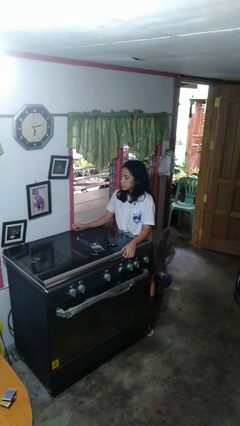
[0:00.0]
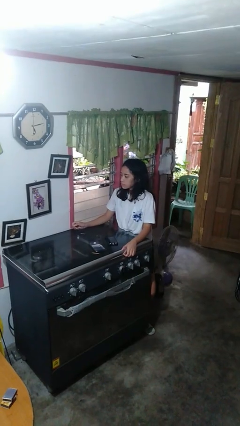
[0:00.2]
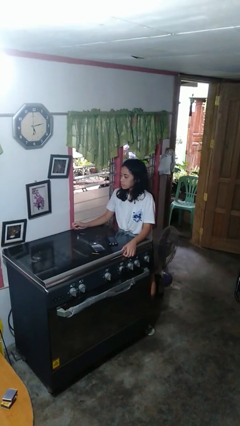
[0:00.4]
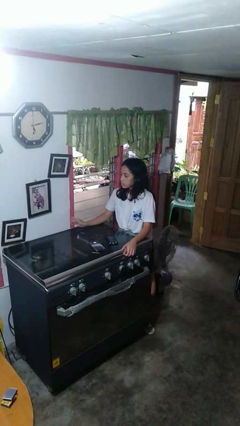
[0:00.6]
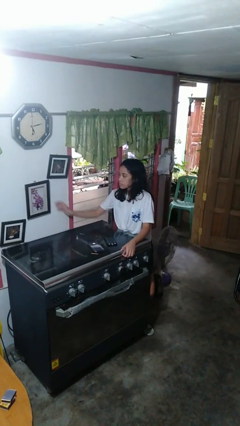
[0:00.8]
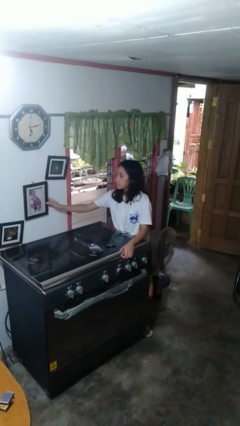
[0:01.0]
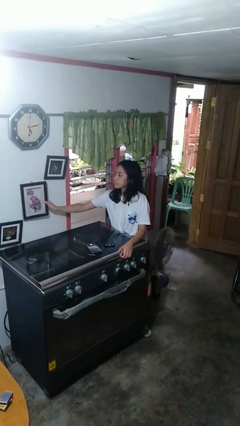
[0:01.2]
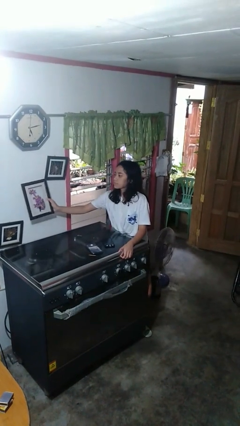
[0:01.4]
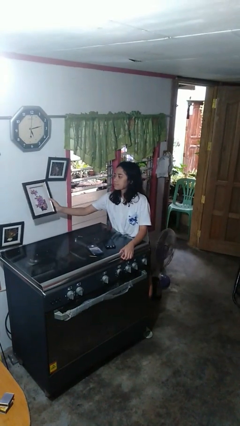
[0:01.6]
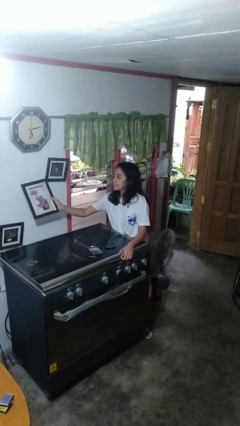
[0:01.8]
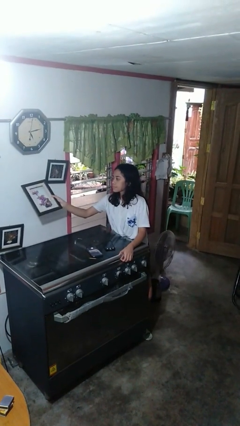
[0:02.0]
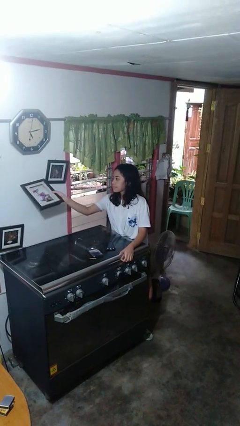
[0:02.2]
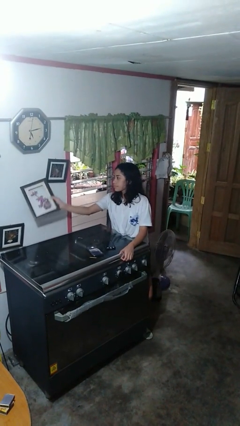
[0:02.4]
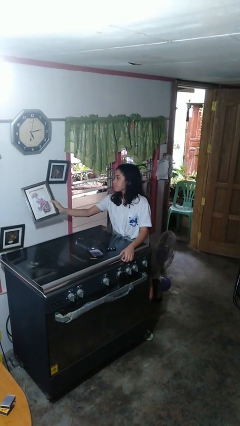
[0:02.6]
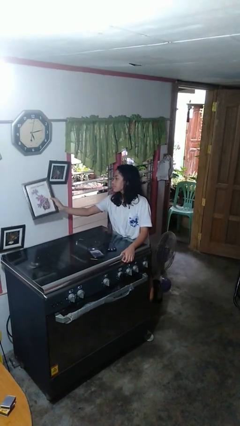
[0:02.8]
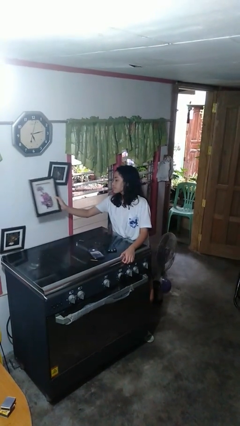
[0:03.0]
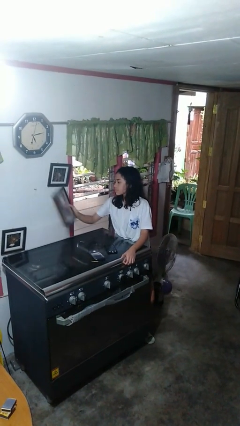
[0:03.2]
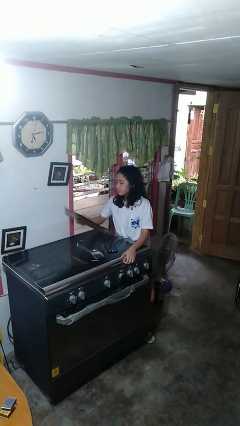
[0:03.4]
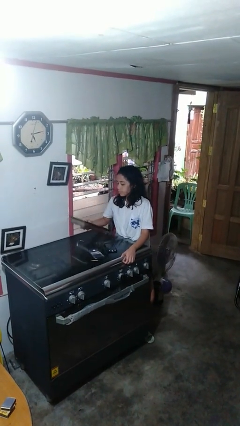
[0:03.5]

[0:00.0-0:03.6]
person takes down picture frame

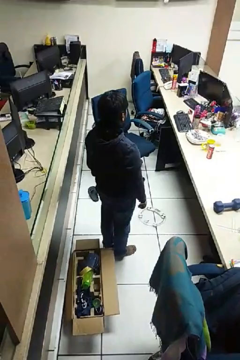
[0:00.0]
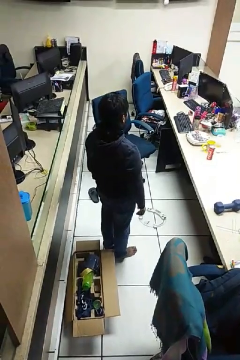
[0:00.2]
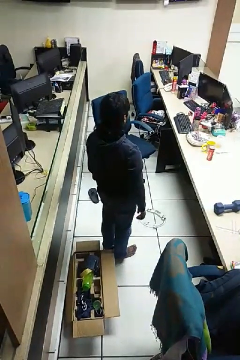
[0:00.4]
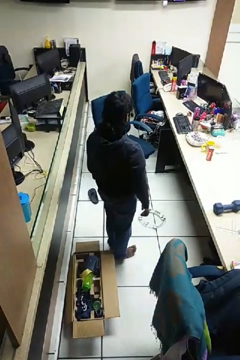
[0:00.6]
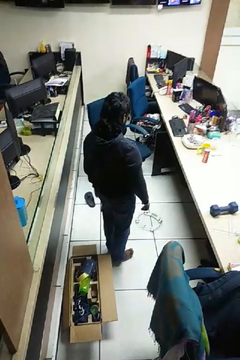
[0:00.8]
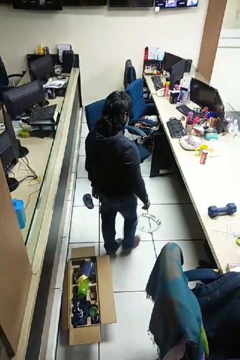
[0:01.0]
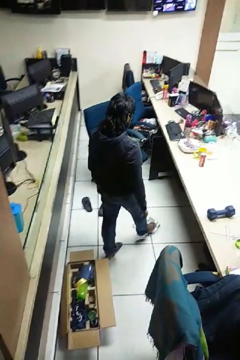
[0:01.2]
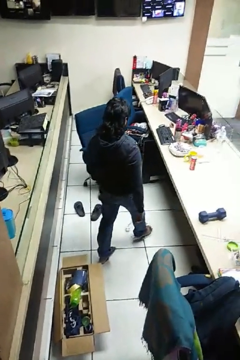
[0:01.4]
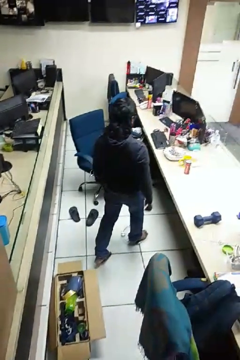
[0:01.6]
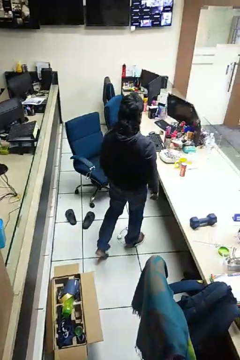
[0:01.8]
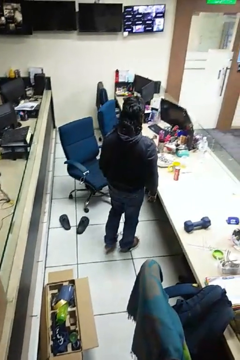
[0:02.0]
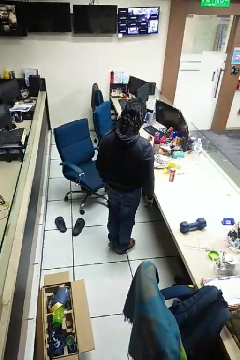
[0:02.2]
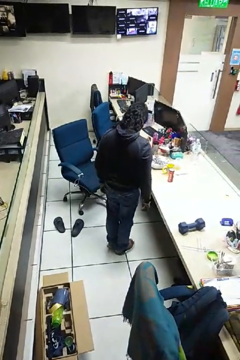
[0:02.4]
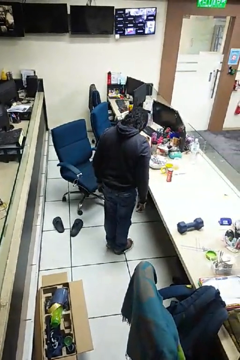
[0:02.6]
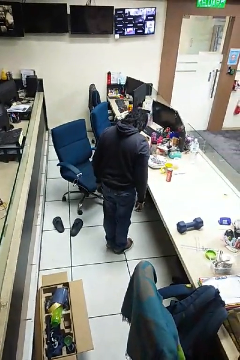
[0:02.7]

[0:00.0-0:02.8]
person uses bodyweight scale

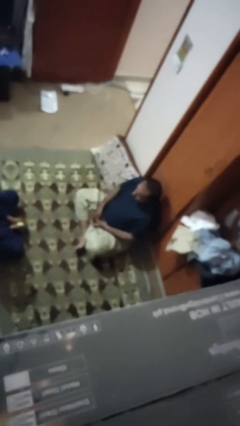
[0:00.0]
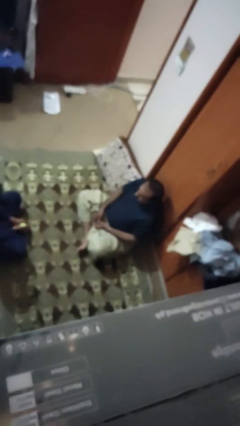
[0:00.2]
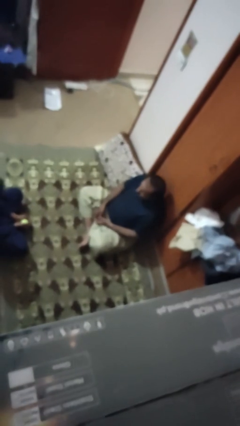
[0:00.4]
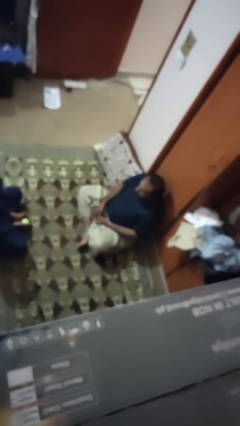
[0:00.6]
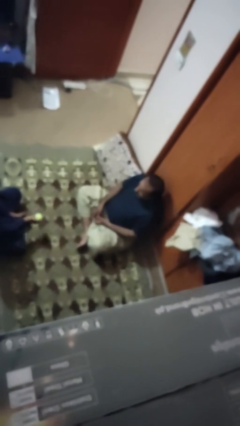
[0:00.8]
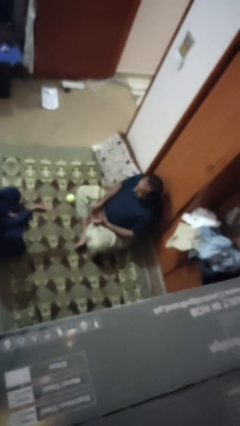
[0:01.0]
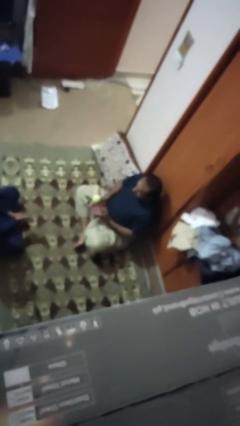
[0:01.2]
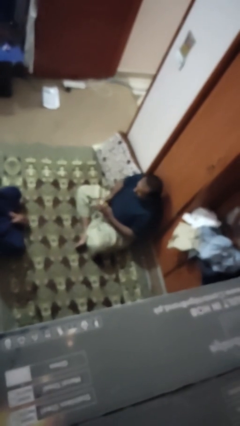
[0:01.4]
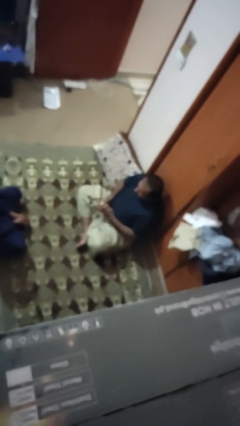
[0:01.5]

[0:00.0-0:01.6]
person catches object from person

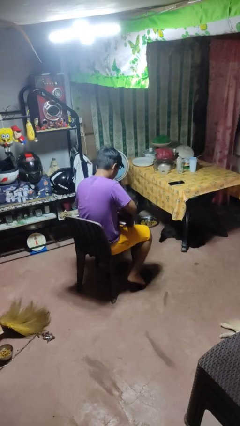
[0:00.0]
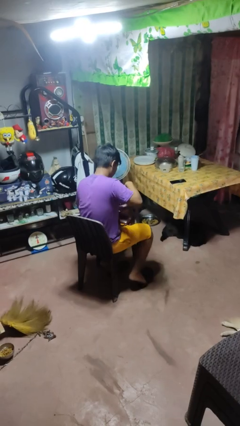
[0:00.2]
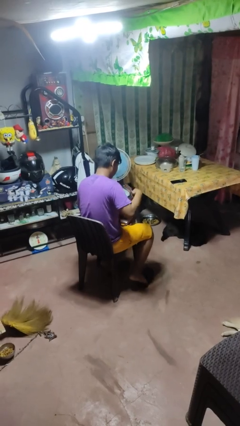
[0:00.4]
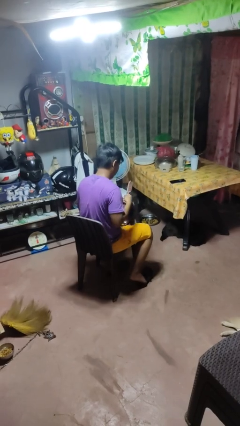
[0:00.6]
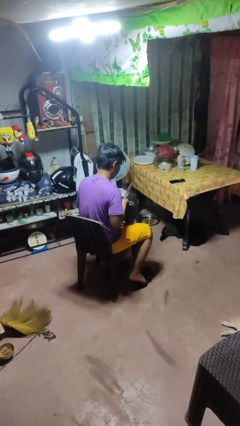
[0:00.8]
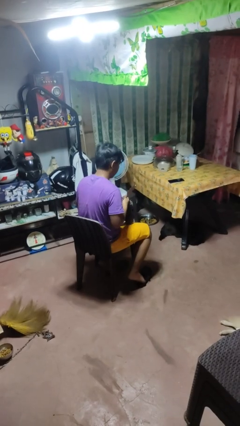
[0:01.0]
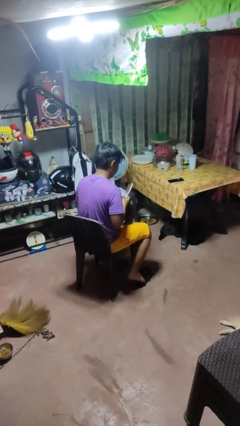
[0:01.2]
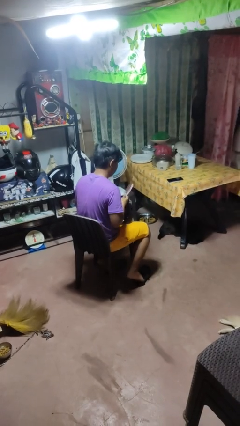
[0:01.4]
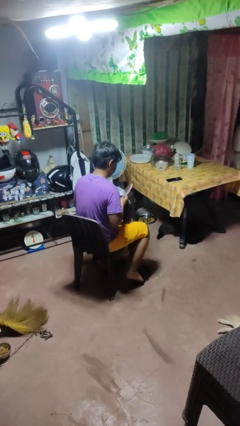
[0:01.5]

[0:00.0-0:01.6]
person takes object from purse

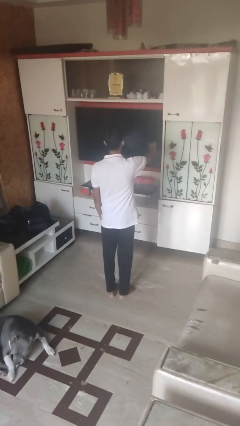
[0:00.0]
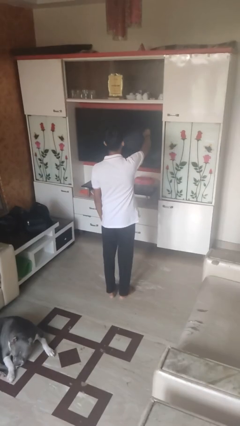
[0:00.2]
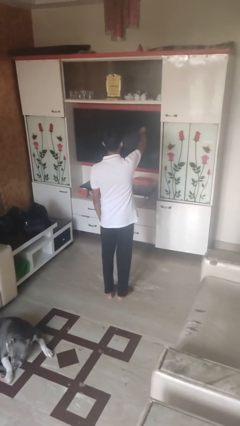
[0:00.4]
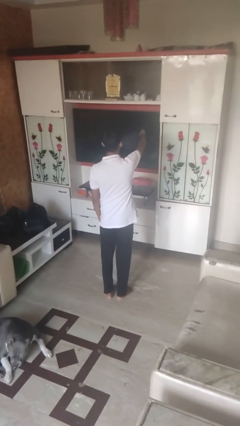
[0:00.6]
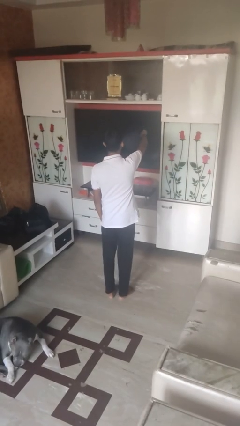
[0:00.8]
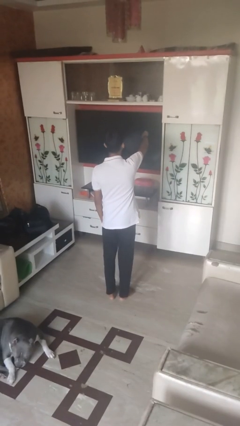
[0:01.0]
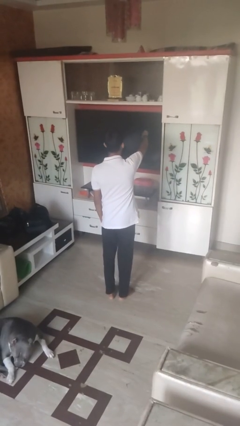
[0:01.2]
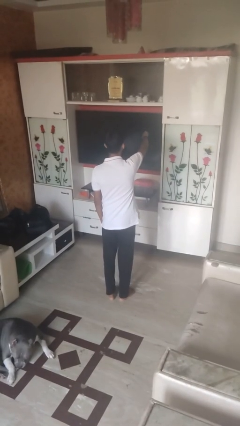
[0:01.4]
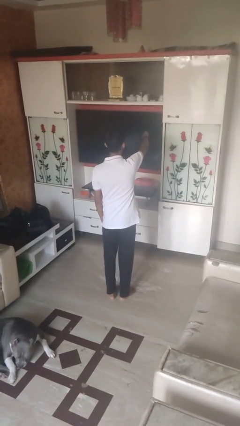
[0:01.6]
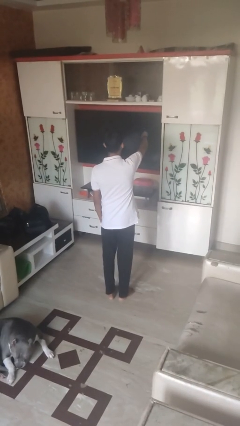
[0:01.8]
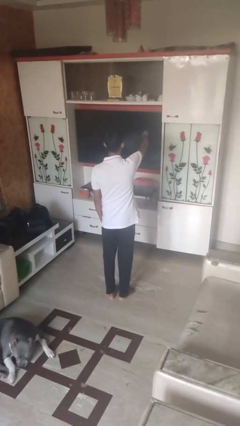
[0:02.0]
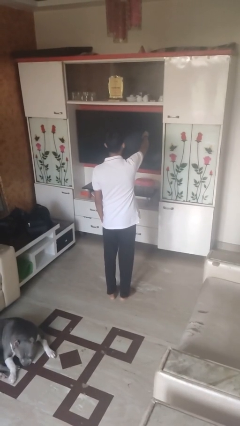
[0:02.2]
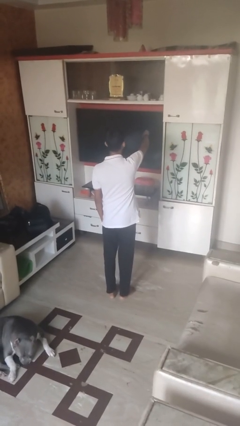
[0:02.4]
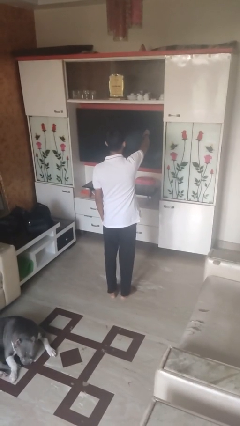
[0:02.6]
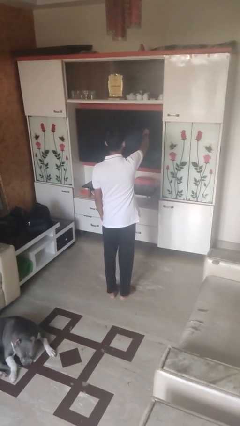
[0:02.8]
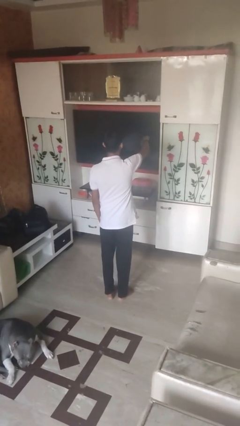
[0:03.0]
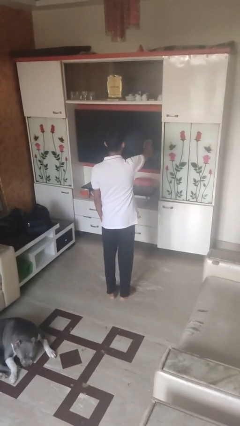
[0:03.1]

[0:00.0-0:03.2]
person gestures thumbs down

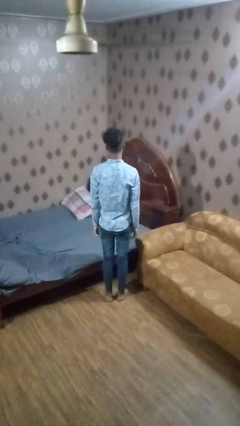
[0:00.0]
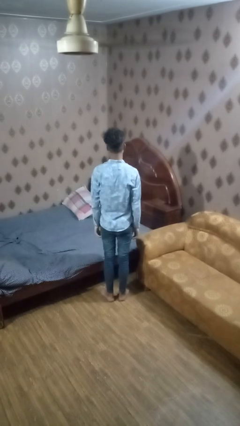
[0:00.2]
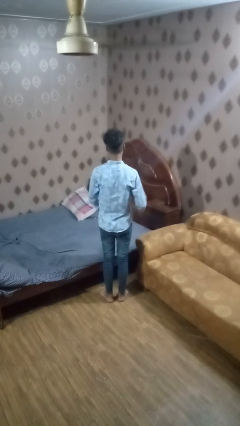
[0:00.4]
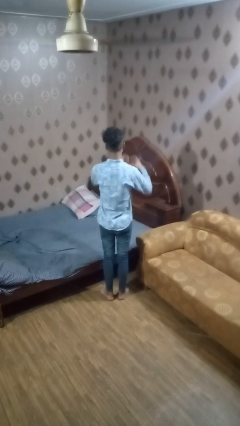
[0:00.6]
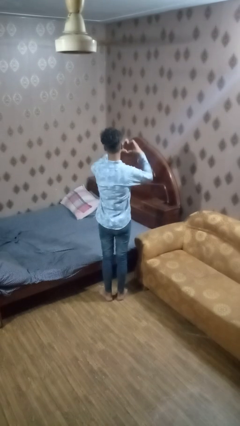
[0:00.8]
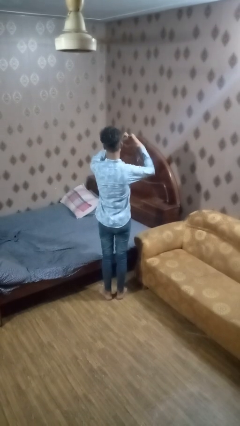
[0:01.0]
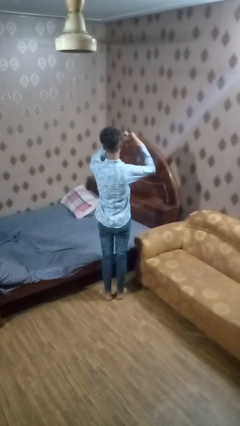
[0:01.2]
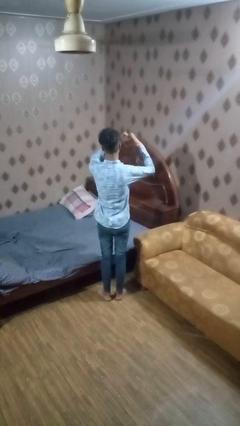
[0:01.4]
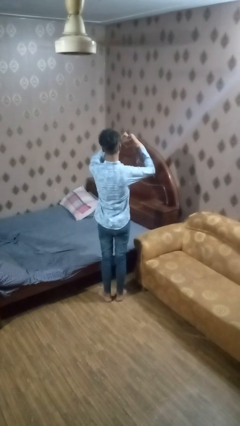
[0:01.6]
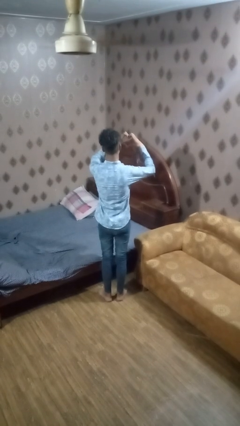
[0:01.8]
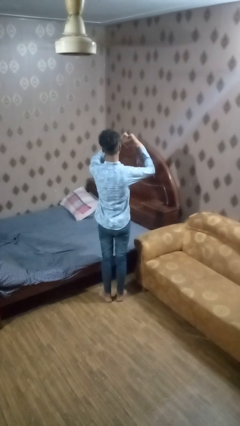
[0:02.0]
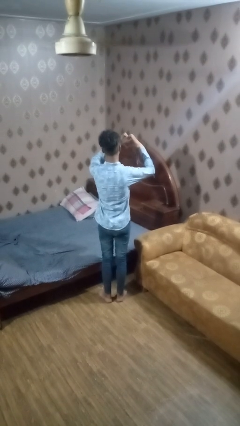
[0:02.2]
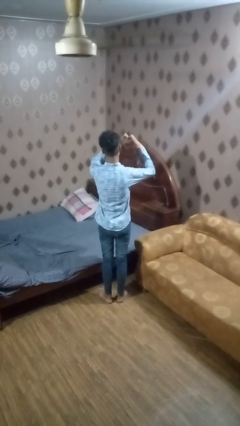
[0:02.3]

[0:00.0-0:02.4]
person gestures heart

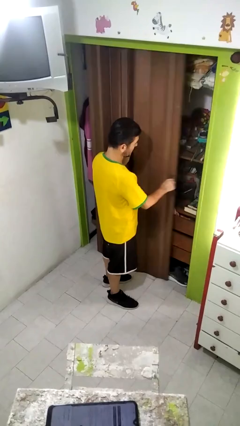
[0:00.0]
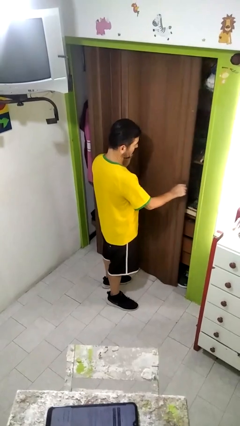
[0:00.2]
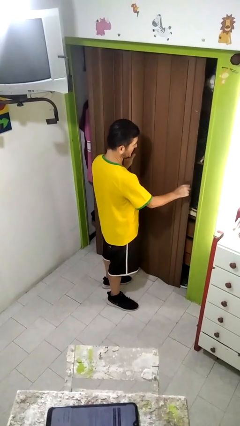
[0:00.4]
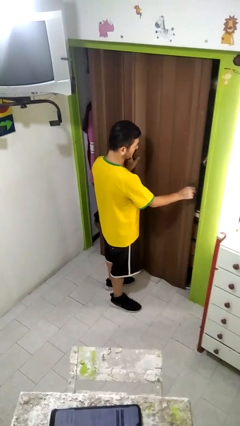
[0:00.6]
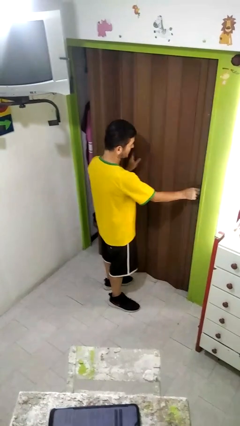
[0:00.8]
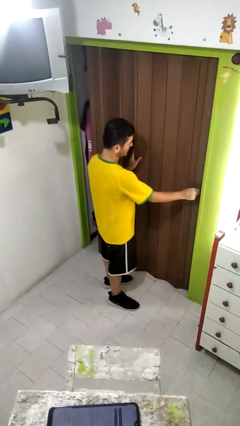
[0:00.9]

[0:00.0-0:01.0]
person closes closet door

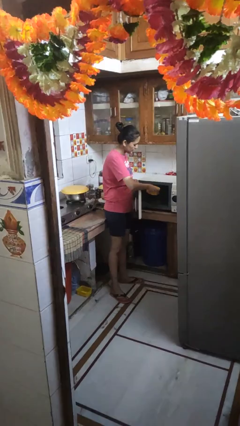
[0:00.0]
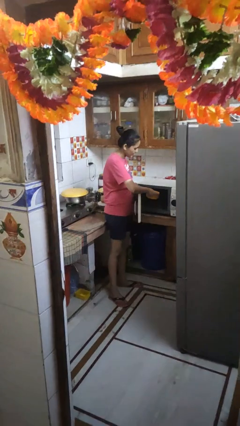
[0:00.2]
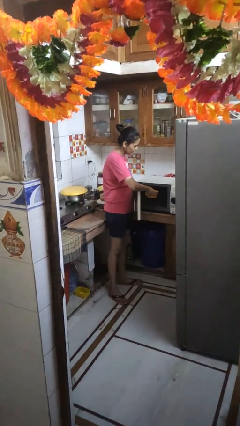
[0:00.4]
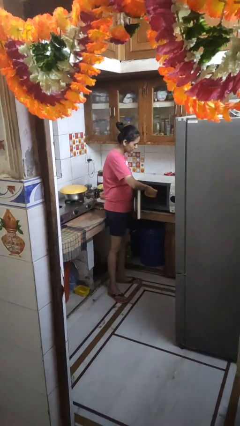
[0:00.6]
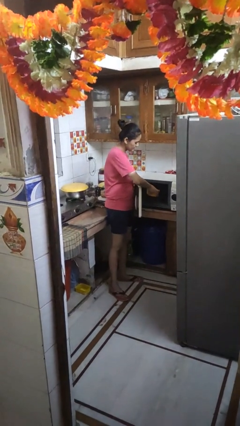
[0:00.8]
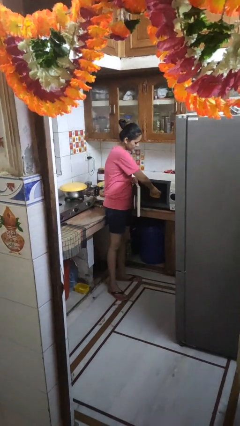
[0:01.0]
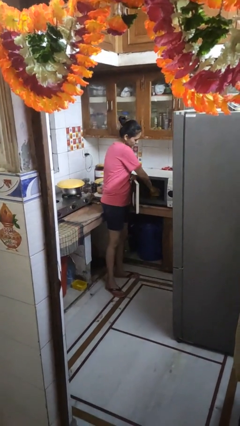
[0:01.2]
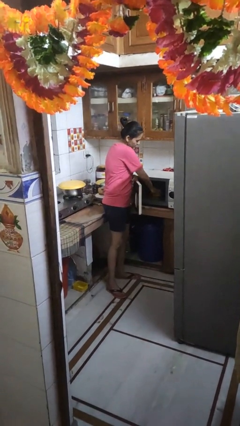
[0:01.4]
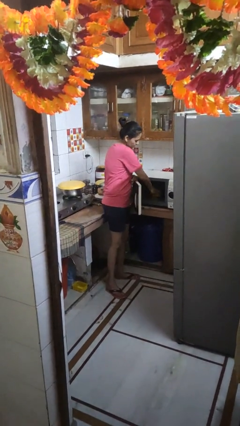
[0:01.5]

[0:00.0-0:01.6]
person puts object into microwave
